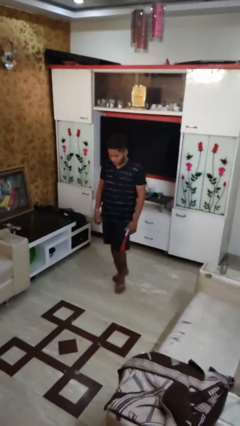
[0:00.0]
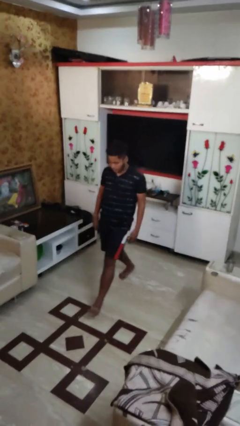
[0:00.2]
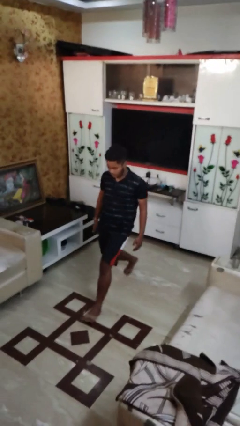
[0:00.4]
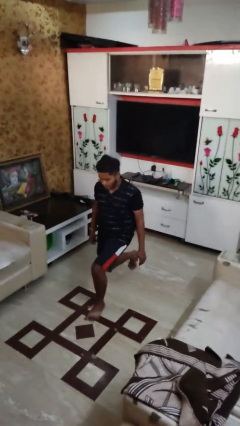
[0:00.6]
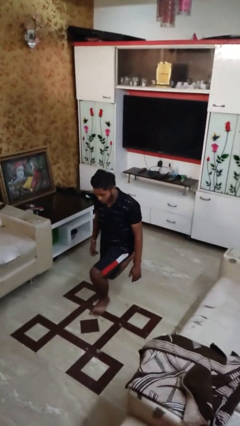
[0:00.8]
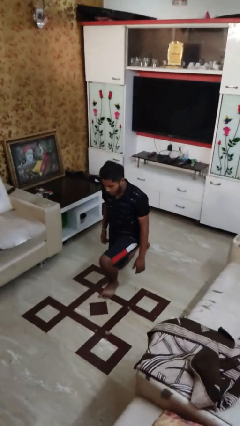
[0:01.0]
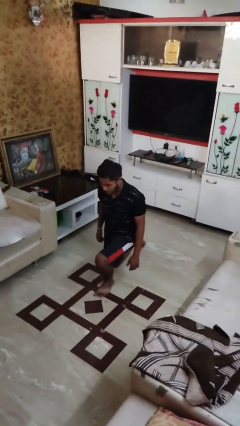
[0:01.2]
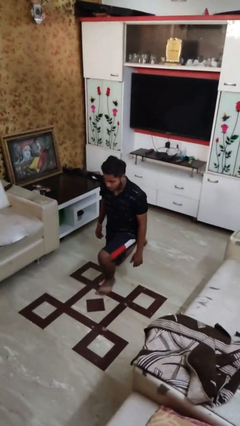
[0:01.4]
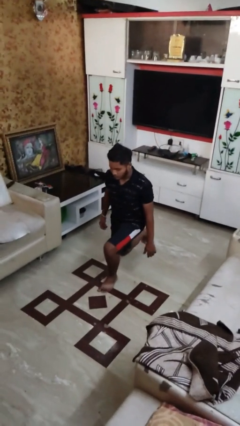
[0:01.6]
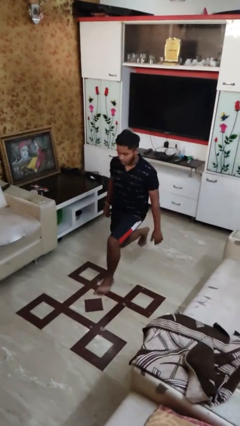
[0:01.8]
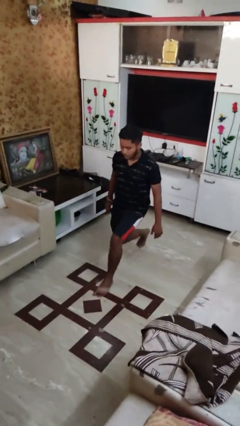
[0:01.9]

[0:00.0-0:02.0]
person exercises with lunges

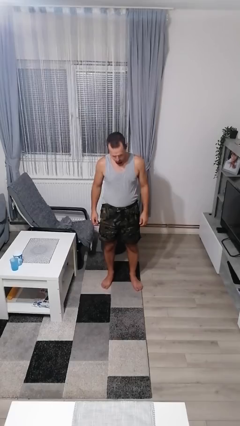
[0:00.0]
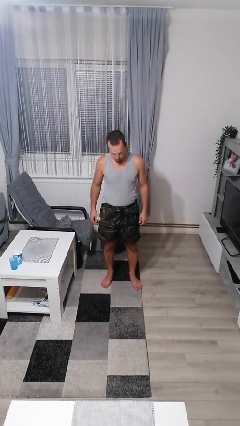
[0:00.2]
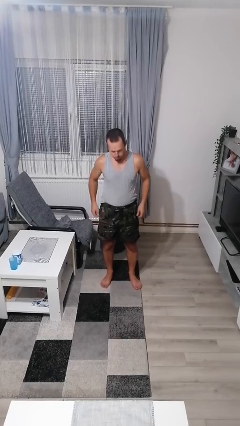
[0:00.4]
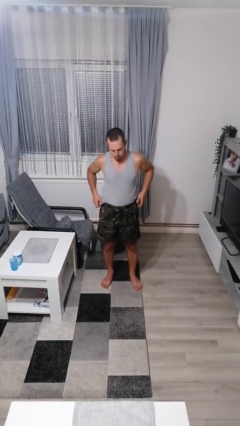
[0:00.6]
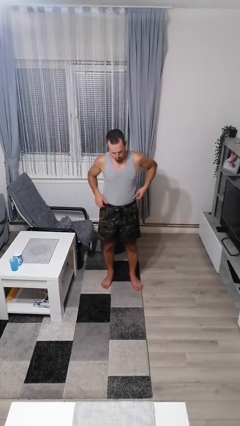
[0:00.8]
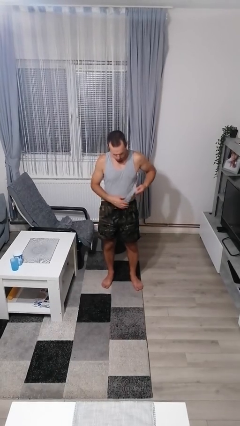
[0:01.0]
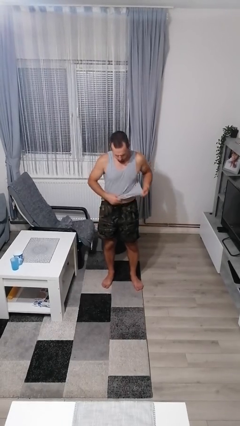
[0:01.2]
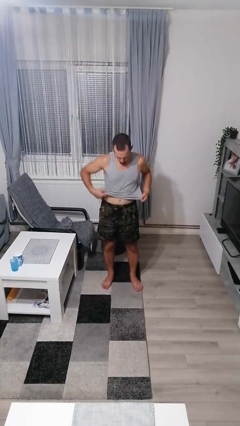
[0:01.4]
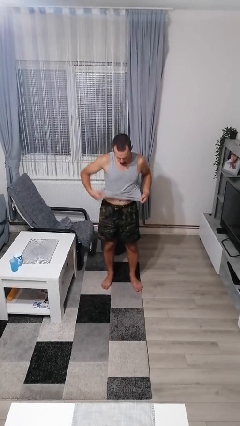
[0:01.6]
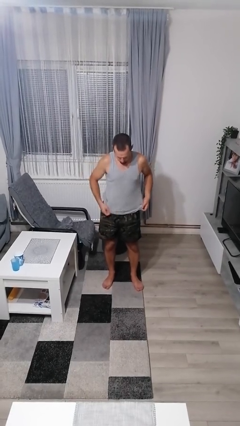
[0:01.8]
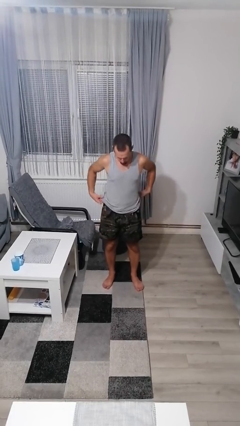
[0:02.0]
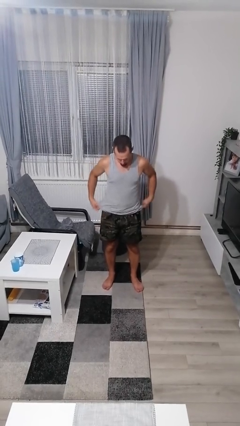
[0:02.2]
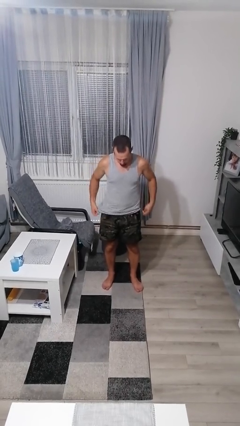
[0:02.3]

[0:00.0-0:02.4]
person untucks shirt

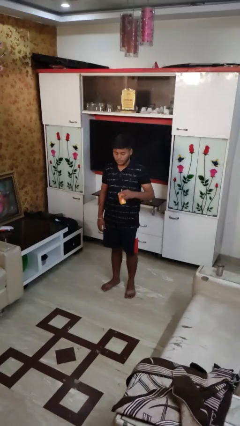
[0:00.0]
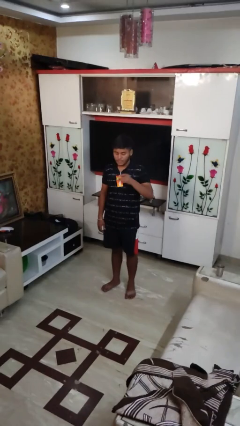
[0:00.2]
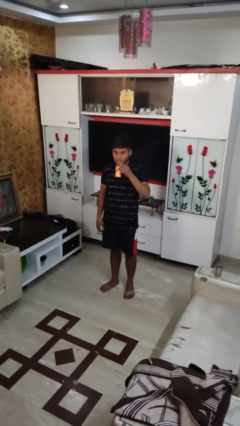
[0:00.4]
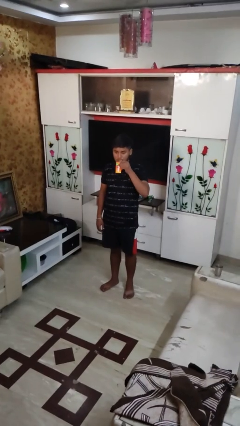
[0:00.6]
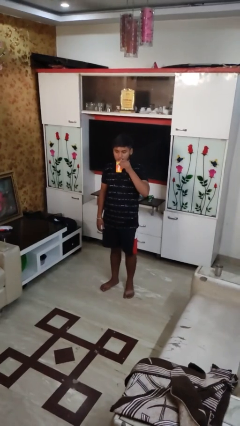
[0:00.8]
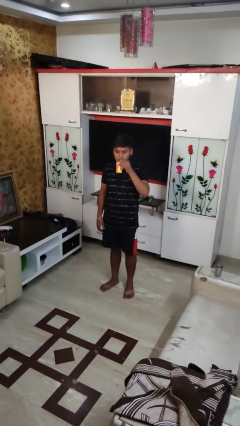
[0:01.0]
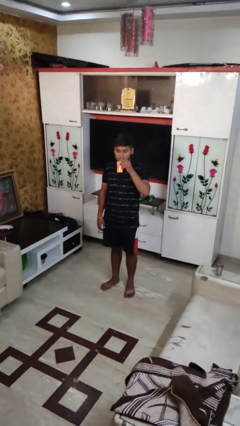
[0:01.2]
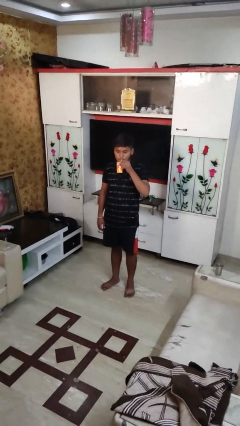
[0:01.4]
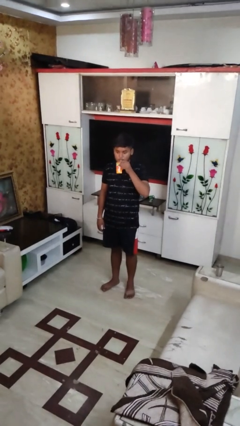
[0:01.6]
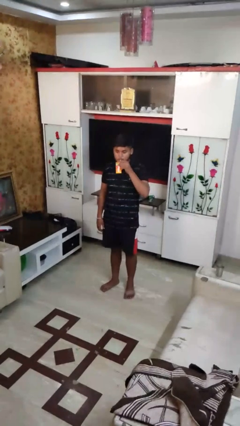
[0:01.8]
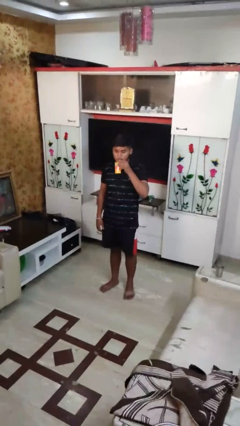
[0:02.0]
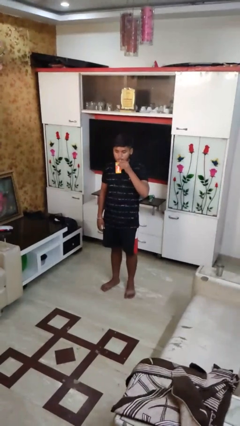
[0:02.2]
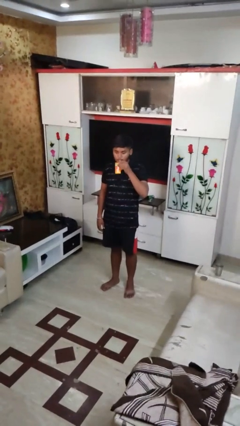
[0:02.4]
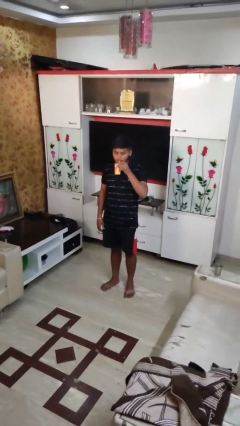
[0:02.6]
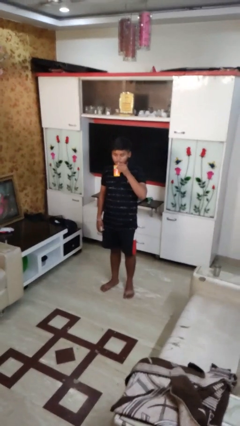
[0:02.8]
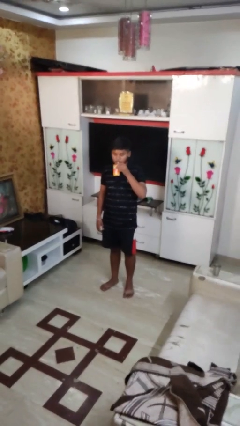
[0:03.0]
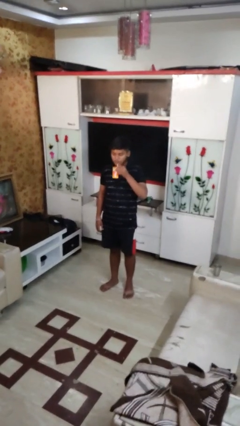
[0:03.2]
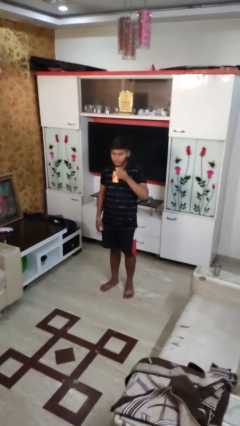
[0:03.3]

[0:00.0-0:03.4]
person drinks from straw

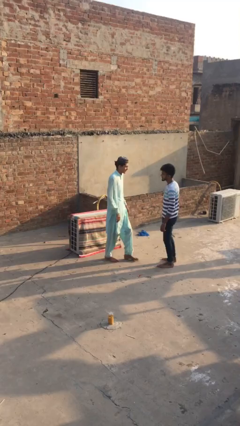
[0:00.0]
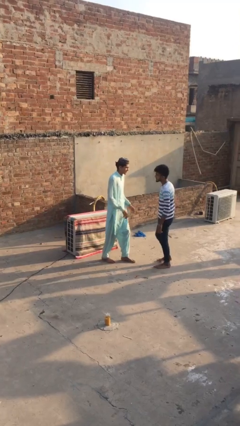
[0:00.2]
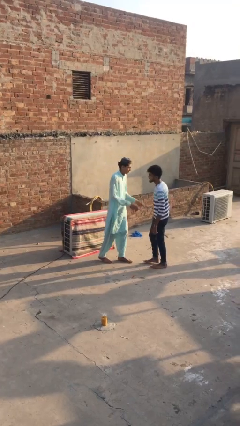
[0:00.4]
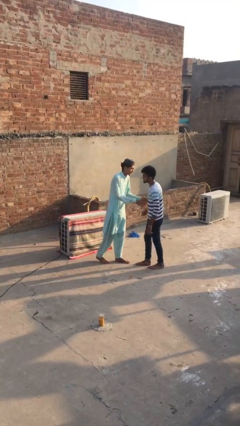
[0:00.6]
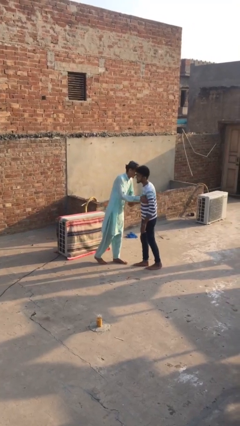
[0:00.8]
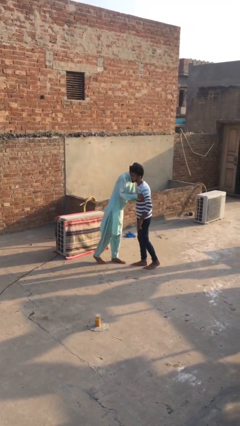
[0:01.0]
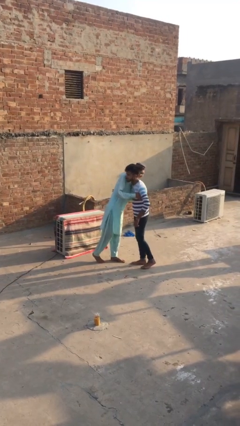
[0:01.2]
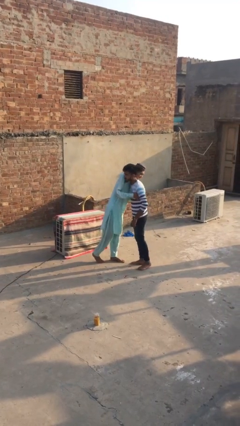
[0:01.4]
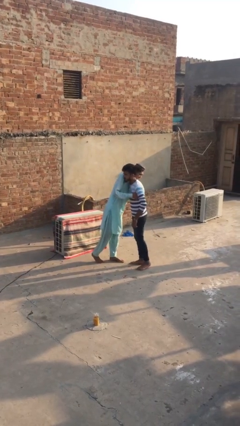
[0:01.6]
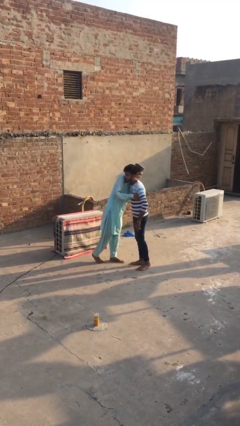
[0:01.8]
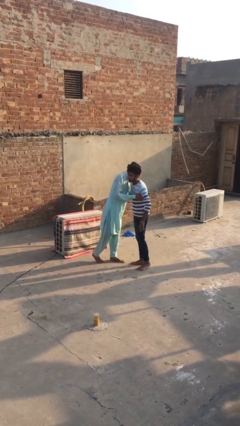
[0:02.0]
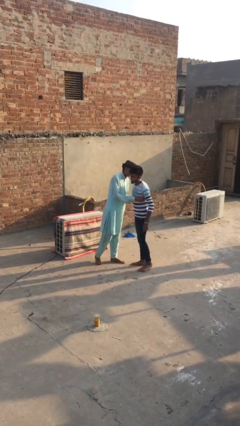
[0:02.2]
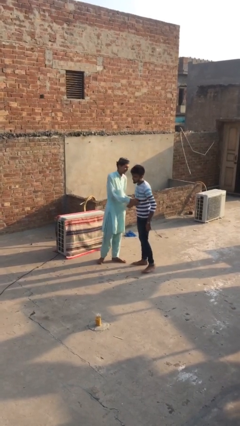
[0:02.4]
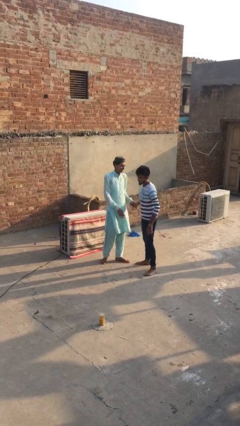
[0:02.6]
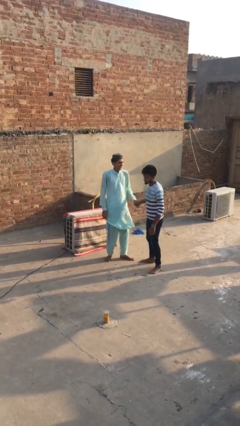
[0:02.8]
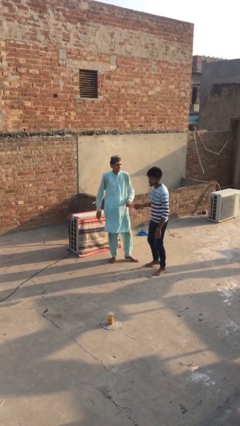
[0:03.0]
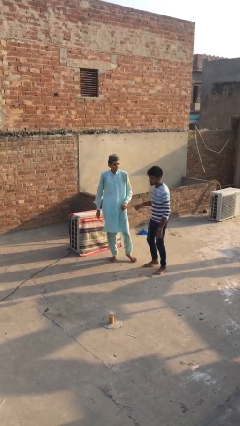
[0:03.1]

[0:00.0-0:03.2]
person embraces person

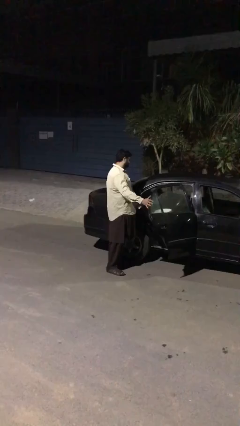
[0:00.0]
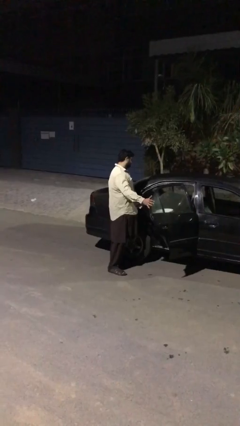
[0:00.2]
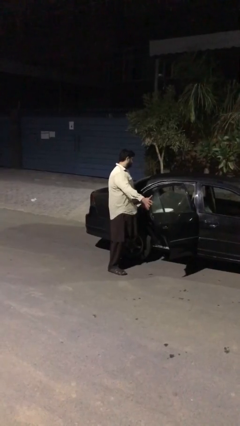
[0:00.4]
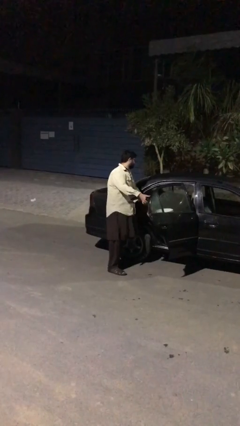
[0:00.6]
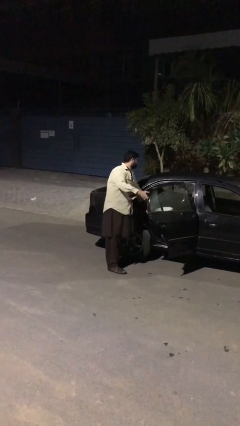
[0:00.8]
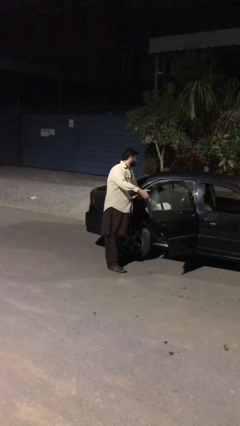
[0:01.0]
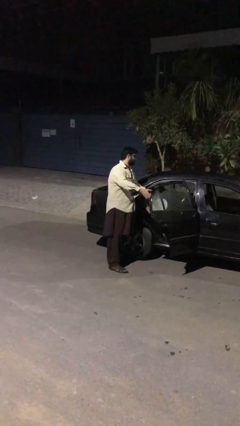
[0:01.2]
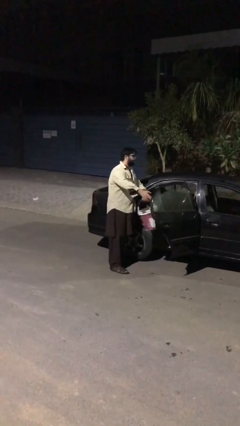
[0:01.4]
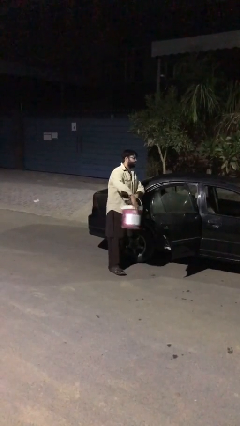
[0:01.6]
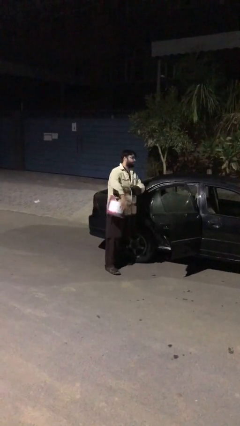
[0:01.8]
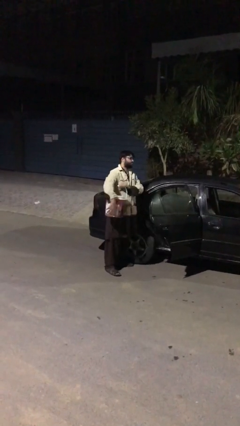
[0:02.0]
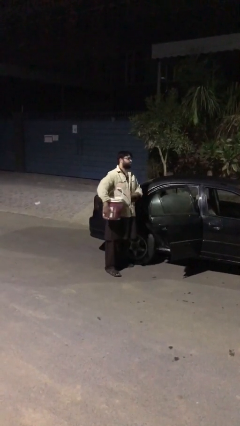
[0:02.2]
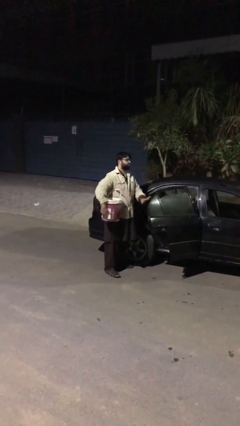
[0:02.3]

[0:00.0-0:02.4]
person unloads car

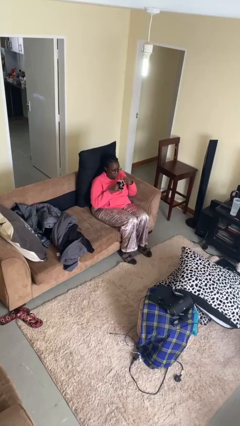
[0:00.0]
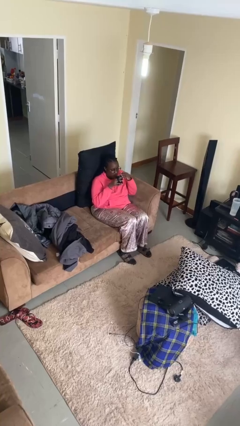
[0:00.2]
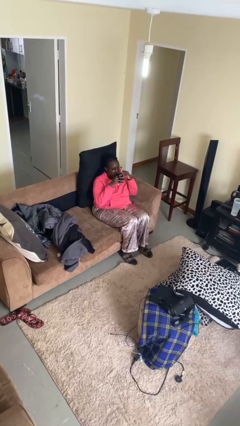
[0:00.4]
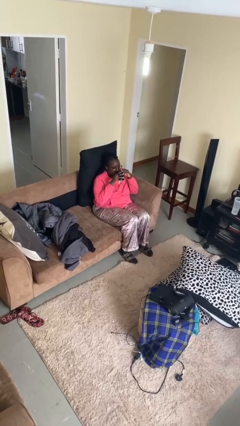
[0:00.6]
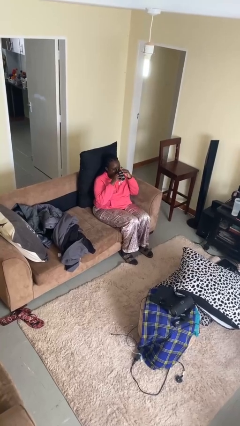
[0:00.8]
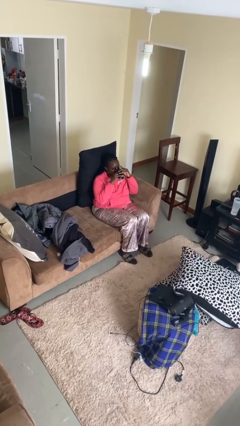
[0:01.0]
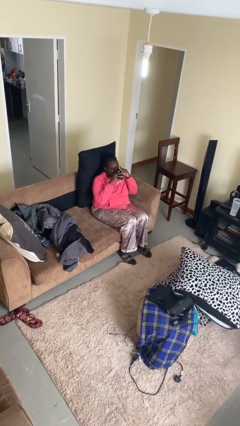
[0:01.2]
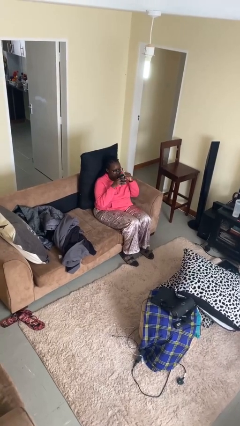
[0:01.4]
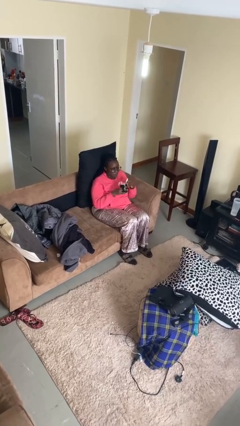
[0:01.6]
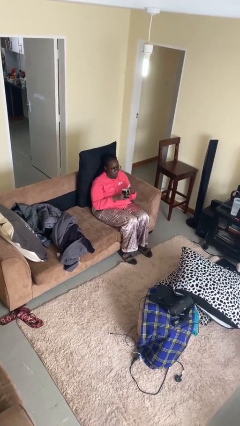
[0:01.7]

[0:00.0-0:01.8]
person drinks from mug

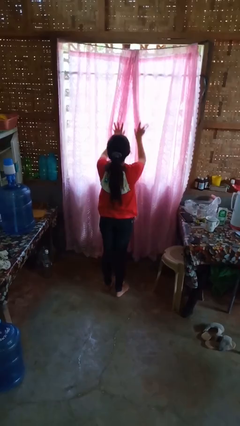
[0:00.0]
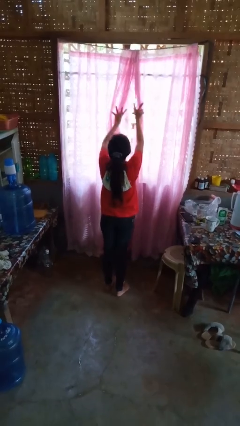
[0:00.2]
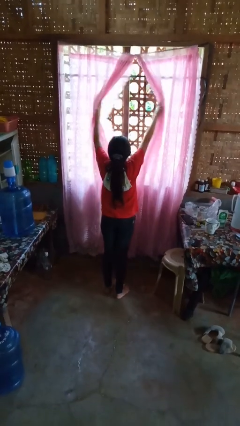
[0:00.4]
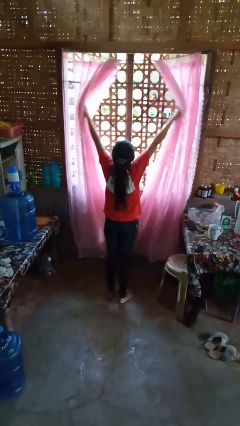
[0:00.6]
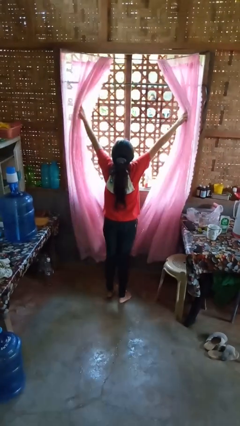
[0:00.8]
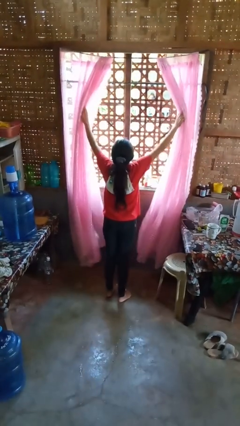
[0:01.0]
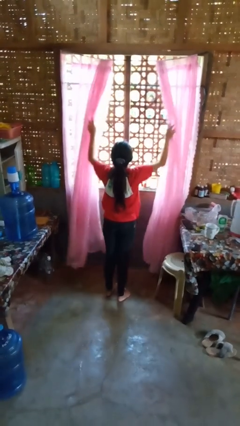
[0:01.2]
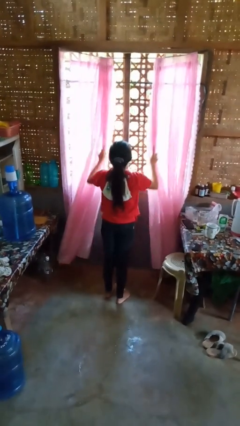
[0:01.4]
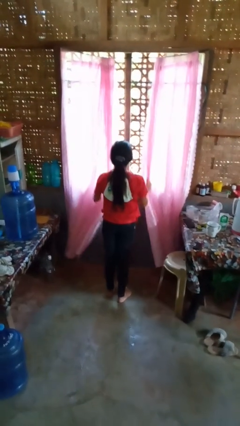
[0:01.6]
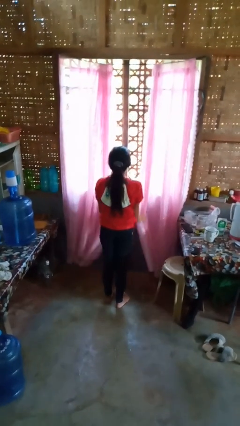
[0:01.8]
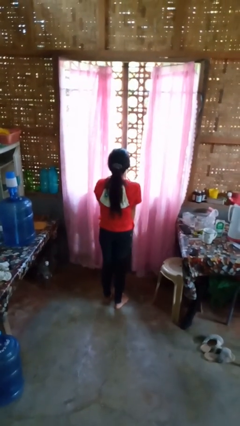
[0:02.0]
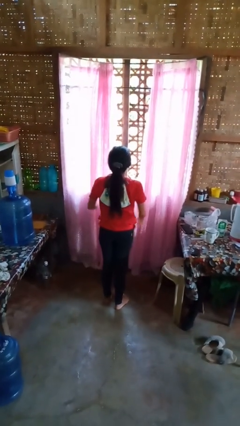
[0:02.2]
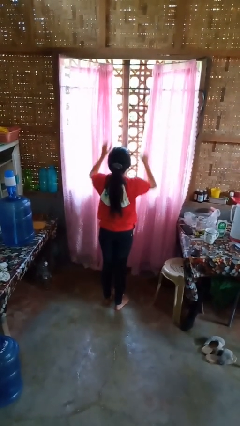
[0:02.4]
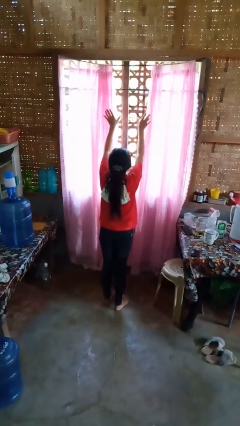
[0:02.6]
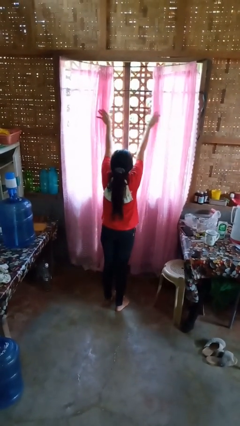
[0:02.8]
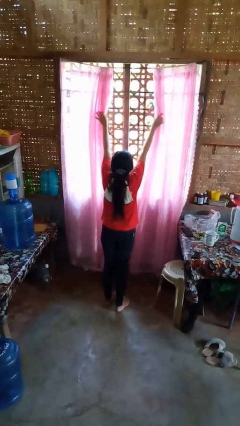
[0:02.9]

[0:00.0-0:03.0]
person opens curtains
